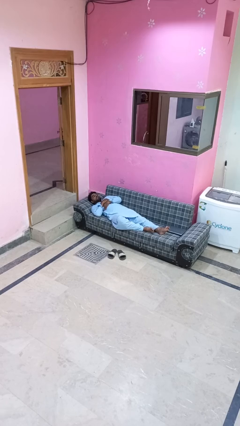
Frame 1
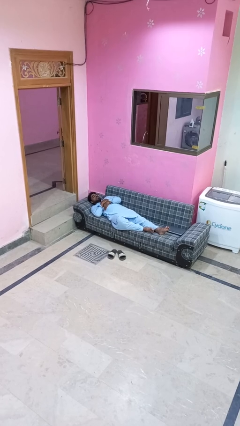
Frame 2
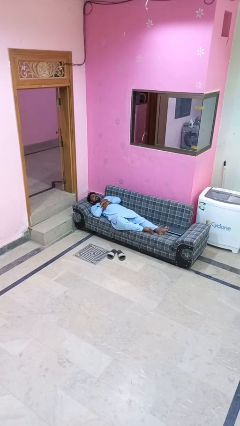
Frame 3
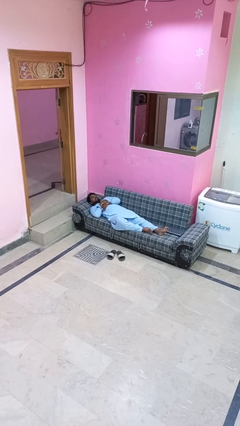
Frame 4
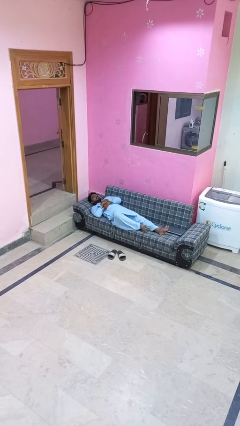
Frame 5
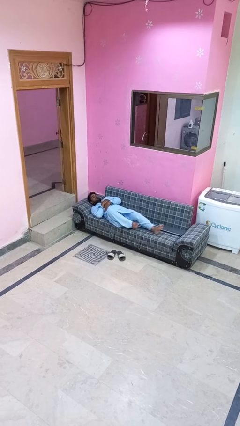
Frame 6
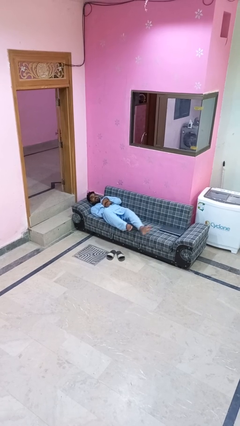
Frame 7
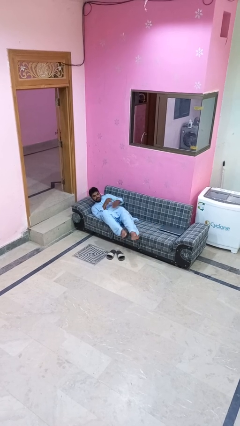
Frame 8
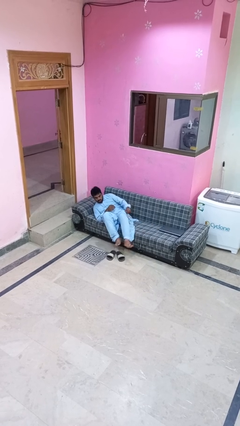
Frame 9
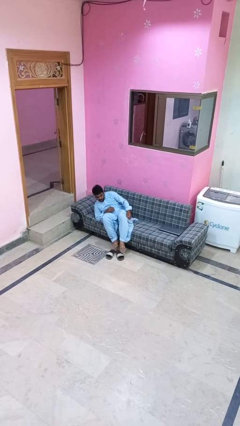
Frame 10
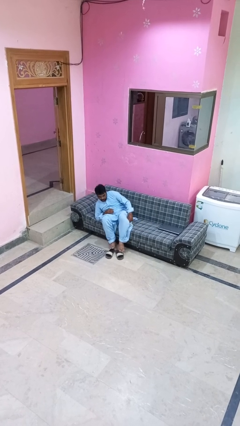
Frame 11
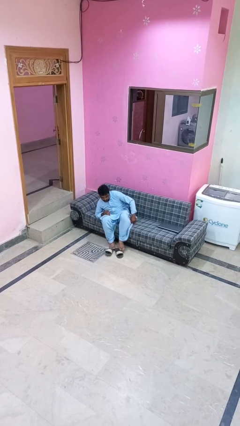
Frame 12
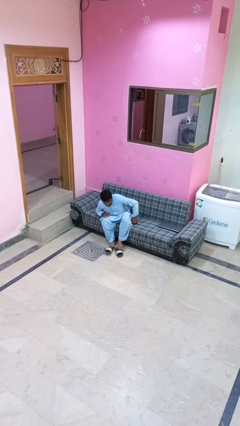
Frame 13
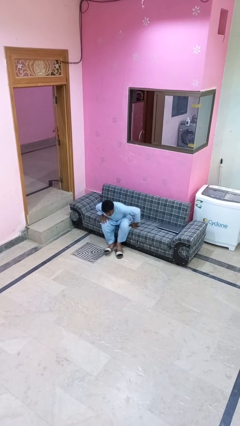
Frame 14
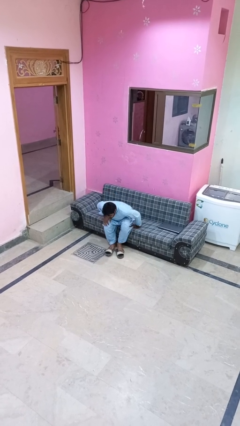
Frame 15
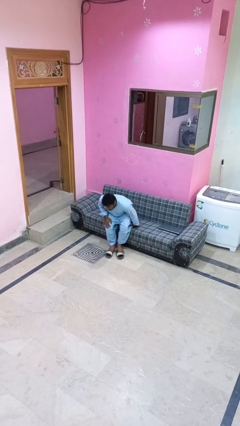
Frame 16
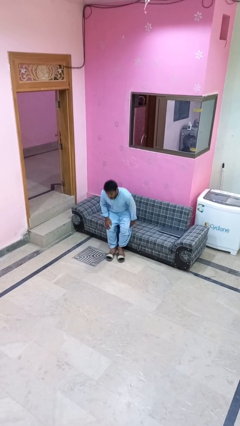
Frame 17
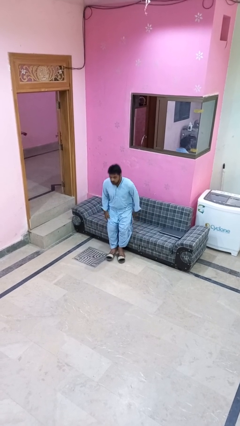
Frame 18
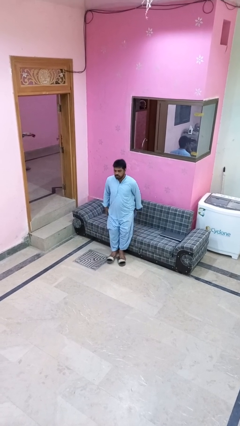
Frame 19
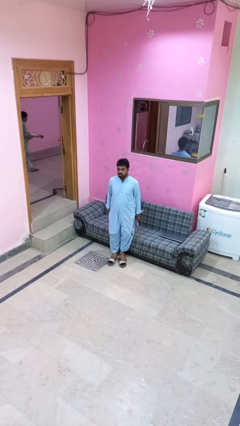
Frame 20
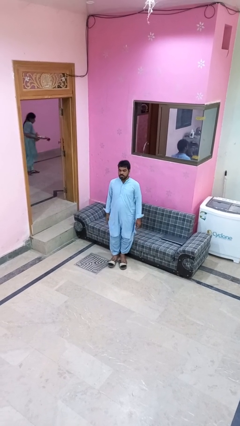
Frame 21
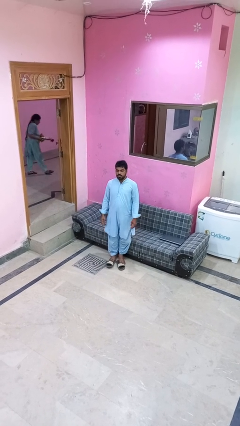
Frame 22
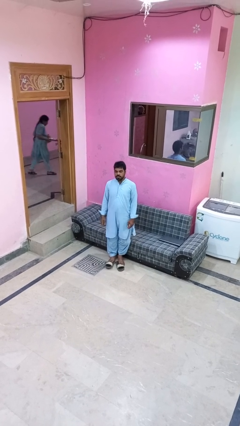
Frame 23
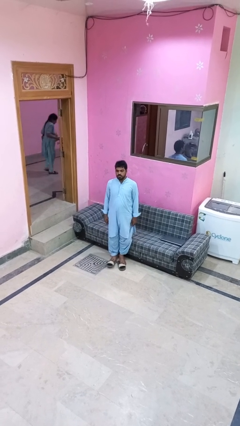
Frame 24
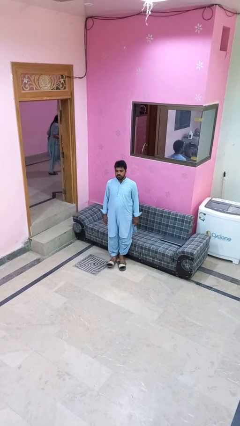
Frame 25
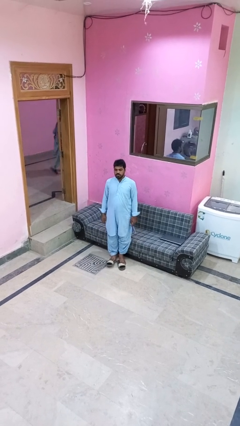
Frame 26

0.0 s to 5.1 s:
person stands up

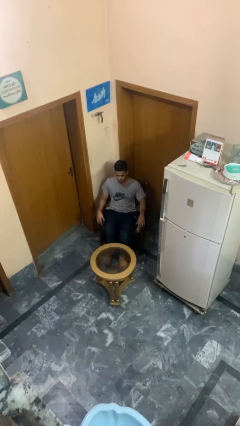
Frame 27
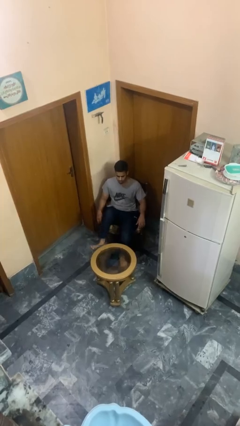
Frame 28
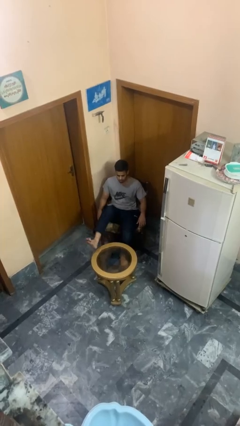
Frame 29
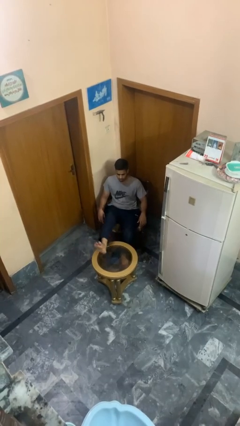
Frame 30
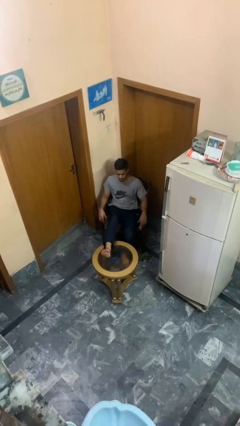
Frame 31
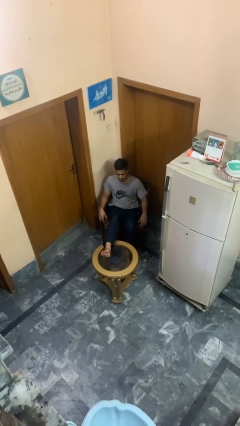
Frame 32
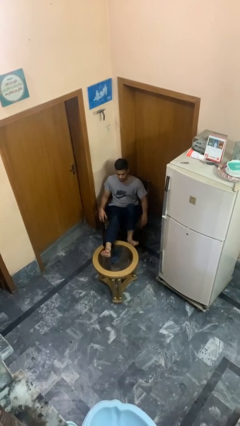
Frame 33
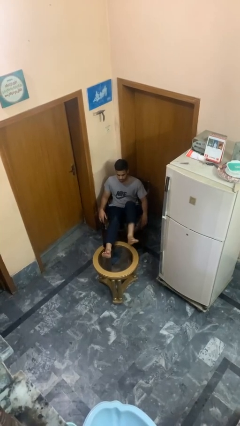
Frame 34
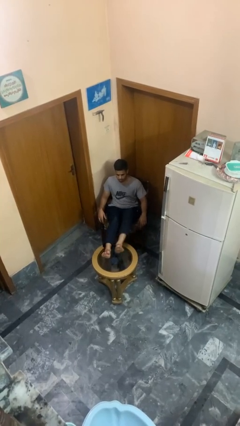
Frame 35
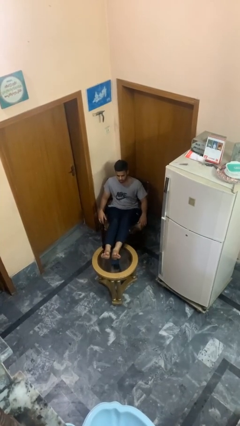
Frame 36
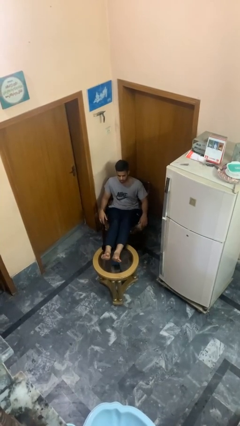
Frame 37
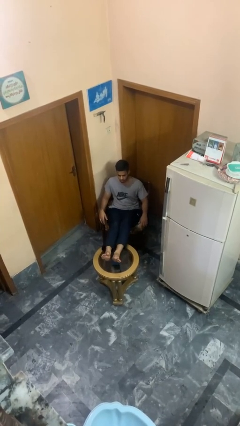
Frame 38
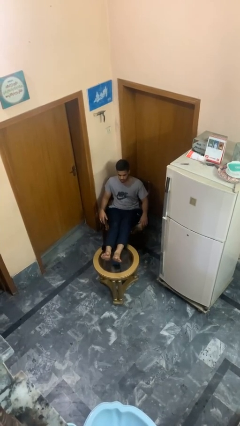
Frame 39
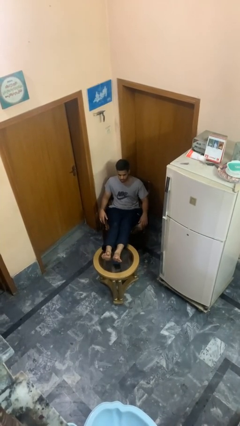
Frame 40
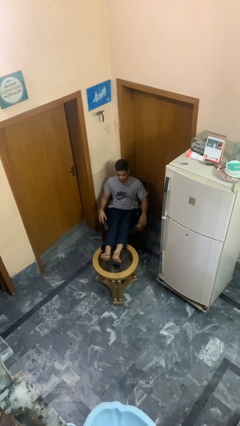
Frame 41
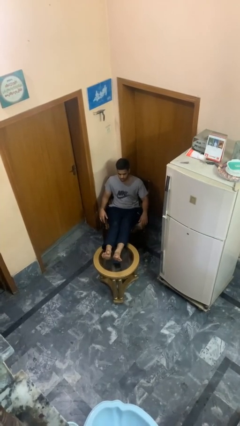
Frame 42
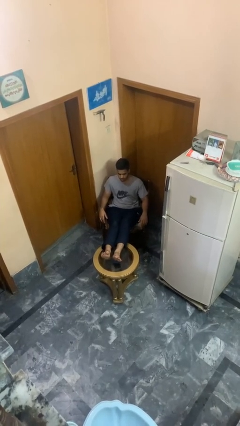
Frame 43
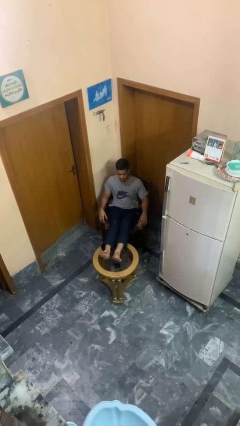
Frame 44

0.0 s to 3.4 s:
person puts feet up

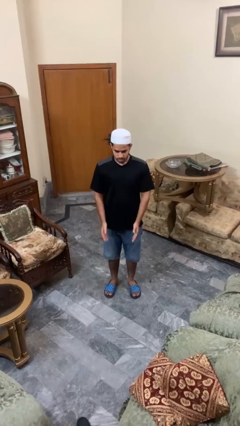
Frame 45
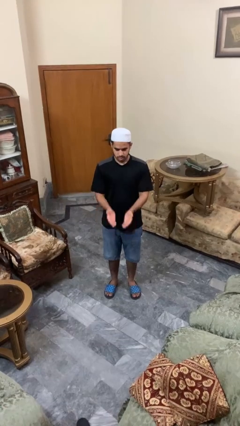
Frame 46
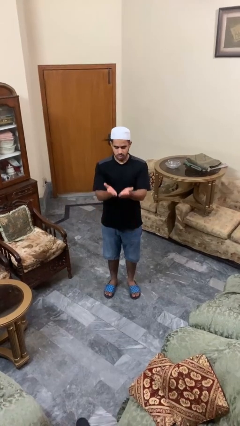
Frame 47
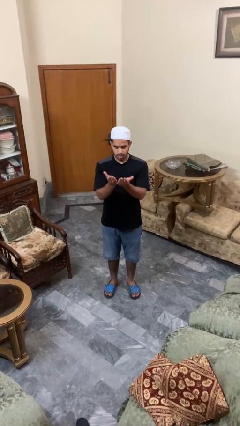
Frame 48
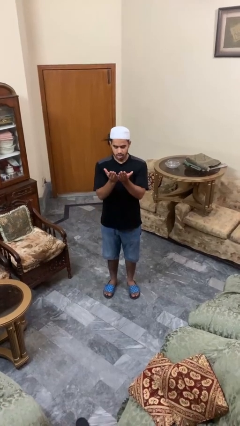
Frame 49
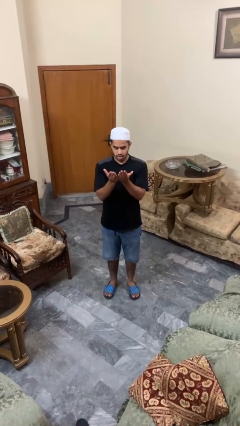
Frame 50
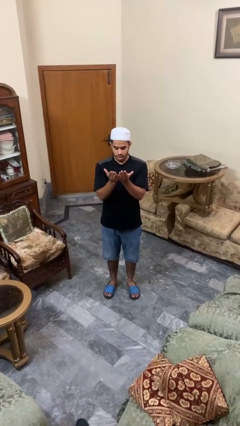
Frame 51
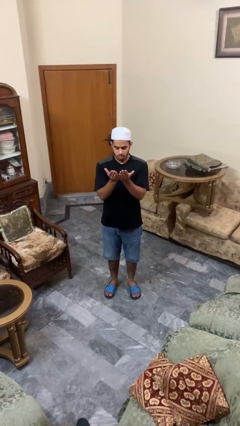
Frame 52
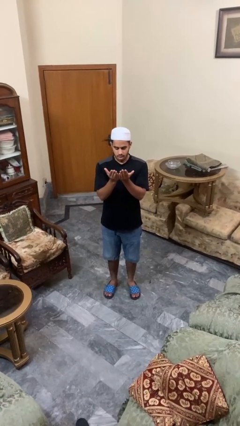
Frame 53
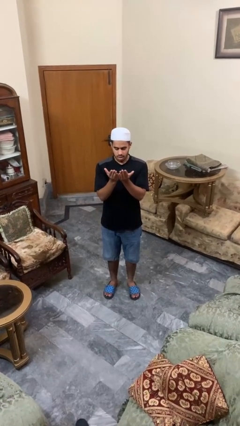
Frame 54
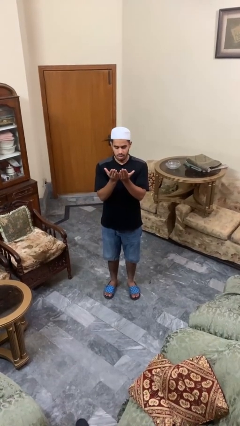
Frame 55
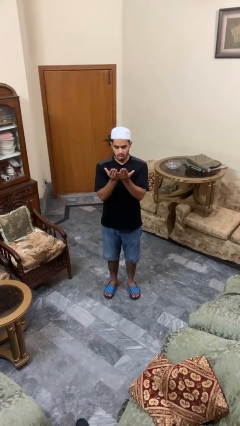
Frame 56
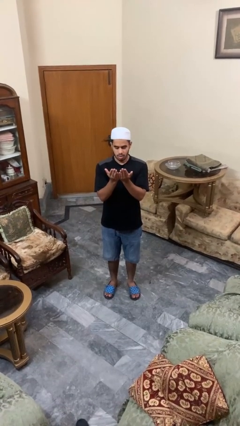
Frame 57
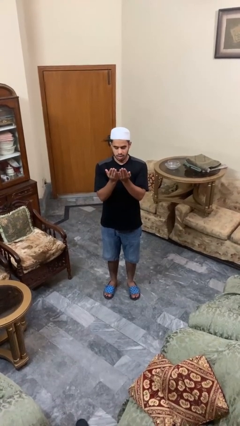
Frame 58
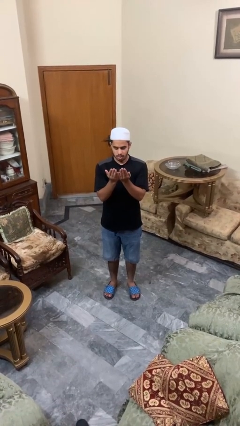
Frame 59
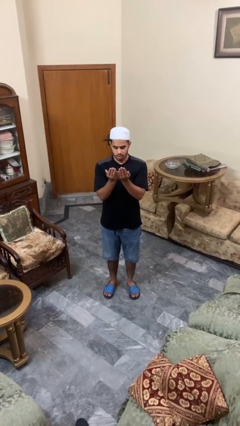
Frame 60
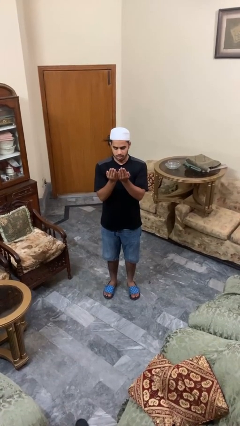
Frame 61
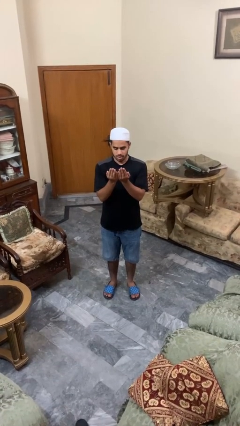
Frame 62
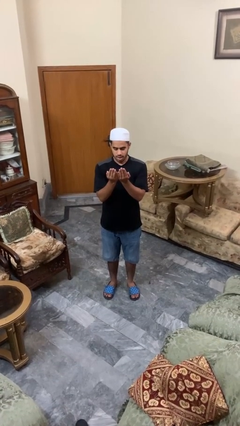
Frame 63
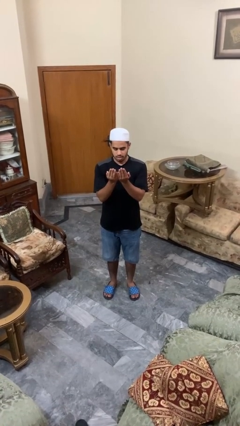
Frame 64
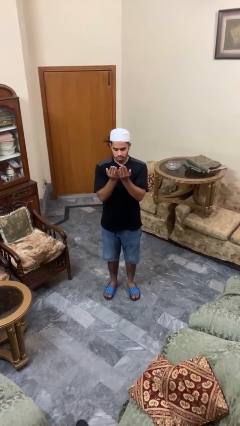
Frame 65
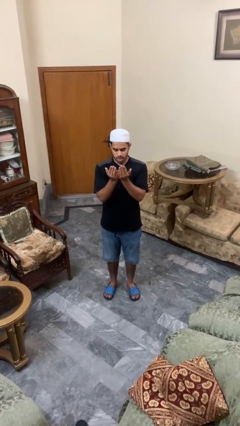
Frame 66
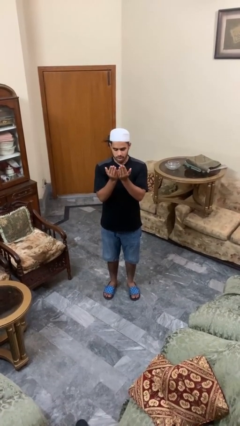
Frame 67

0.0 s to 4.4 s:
person prays

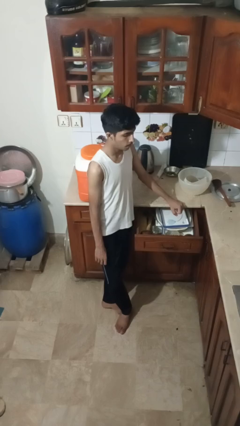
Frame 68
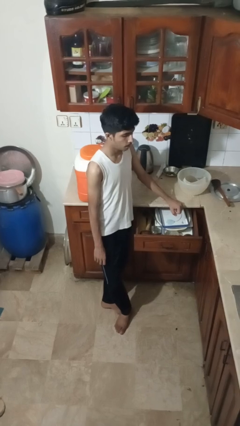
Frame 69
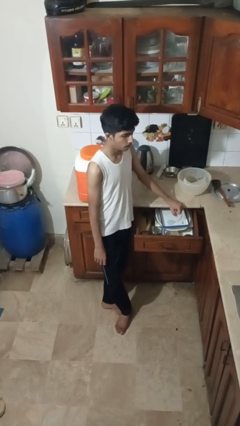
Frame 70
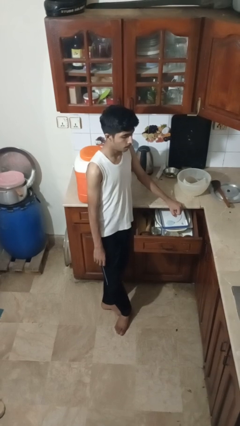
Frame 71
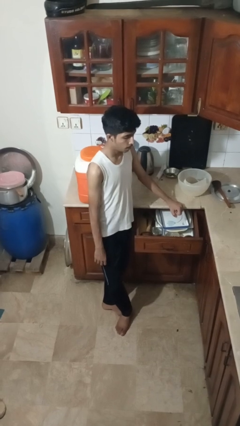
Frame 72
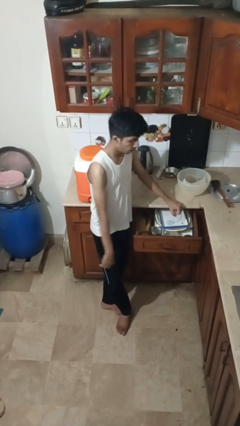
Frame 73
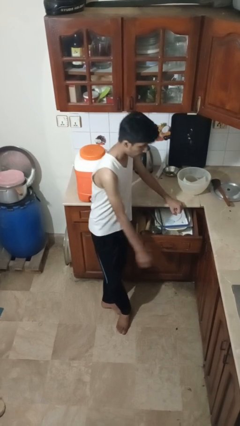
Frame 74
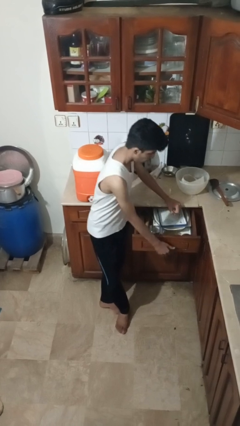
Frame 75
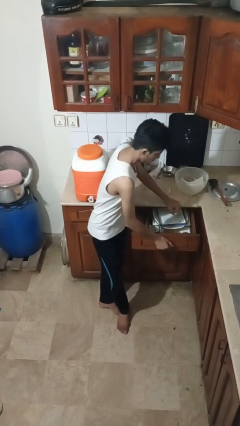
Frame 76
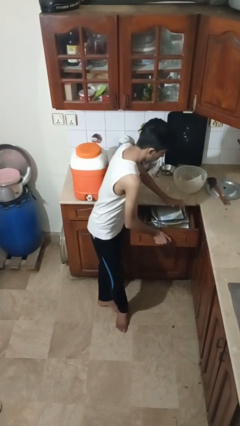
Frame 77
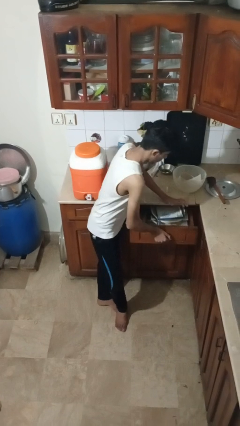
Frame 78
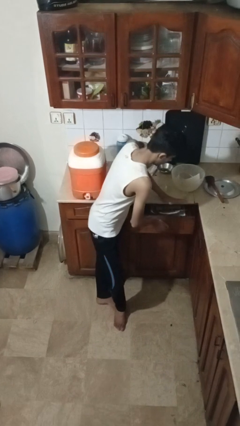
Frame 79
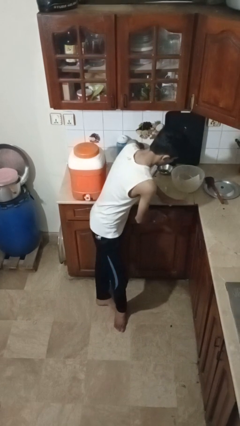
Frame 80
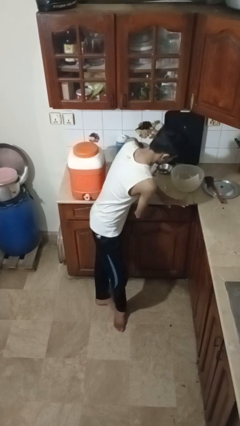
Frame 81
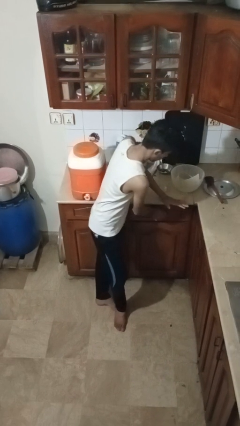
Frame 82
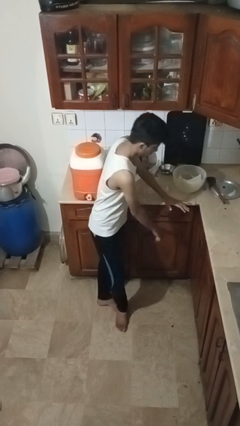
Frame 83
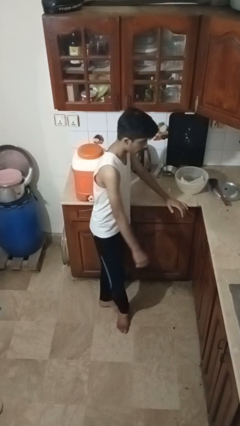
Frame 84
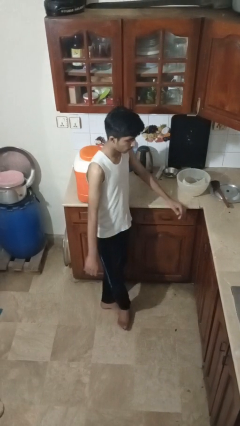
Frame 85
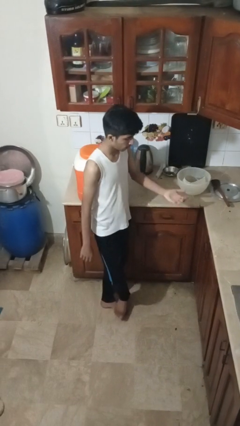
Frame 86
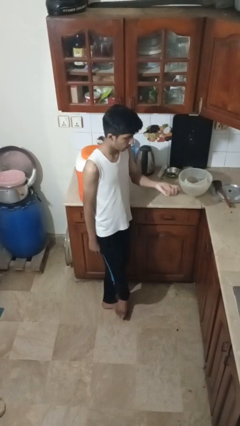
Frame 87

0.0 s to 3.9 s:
person closes kitchen drawer

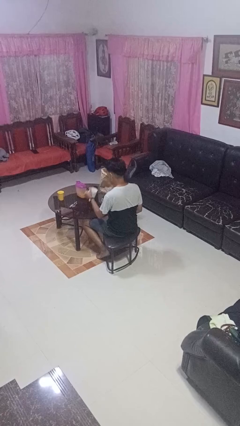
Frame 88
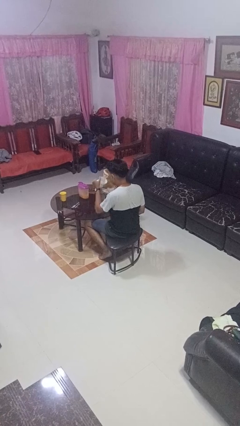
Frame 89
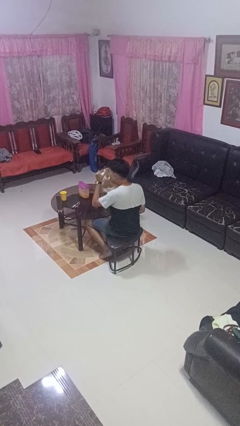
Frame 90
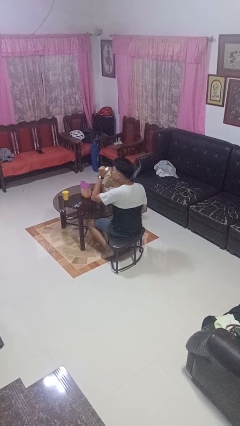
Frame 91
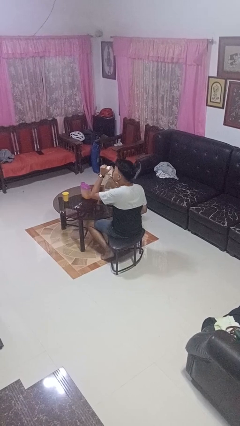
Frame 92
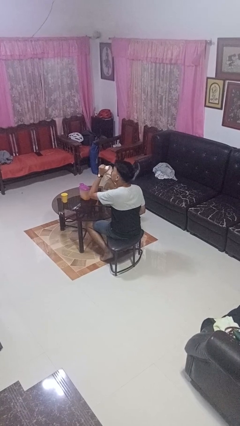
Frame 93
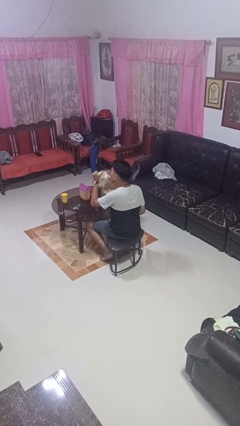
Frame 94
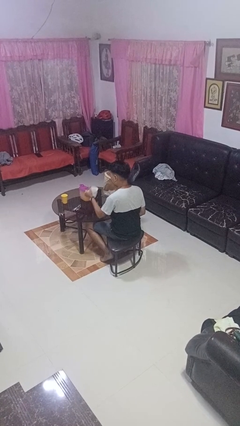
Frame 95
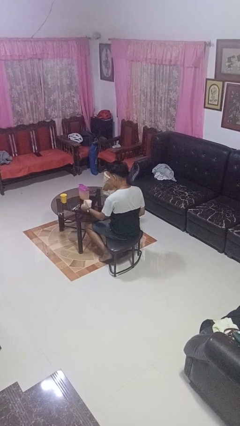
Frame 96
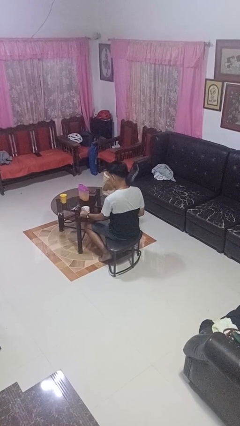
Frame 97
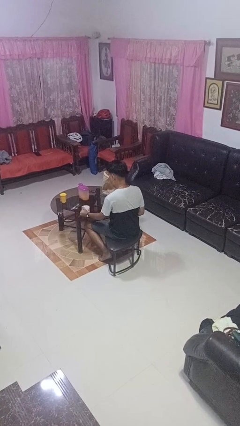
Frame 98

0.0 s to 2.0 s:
person drinks from mug
